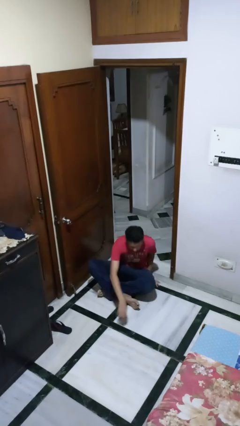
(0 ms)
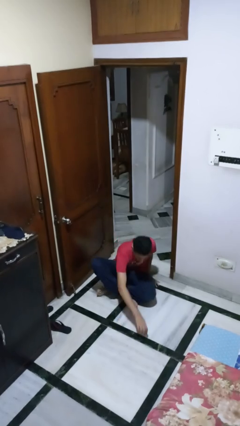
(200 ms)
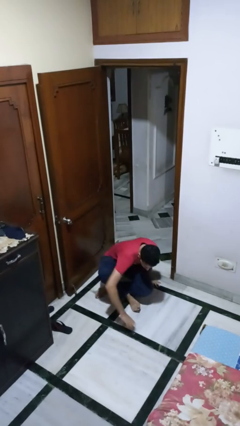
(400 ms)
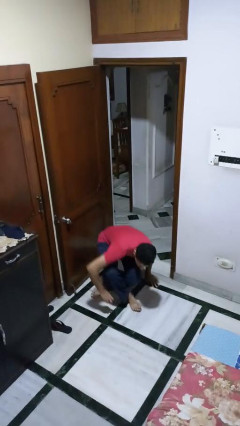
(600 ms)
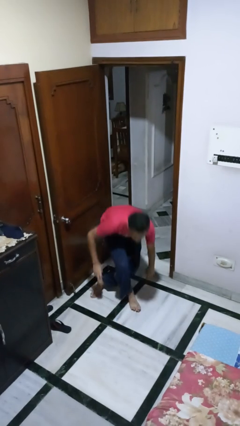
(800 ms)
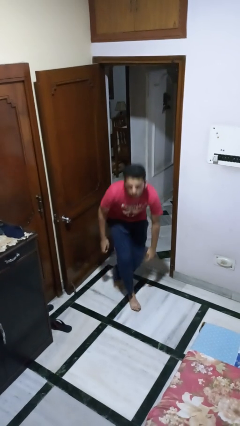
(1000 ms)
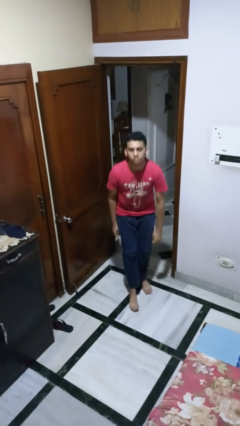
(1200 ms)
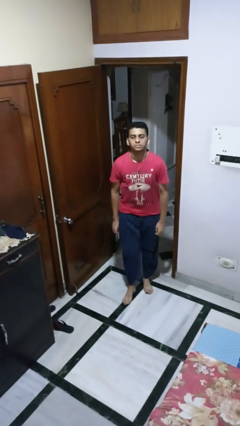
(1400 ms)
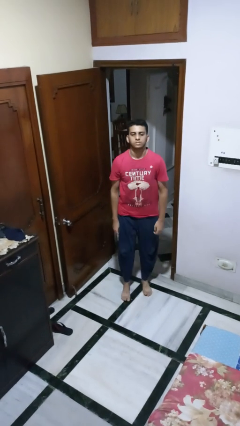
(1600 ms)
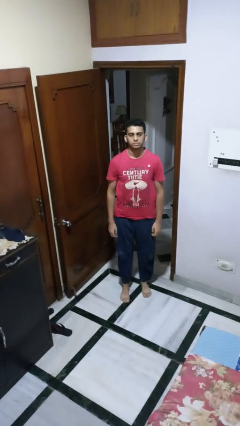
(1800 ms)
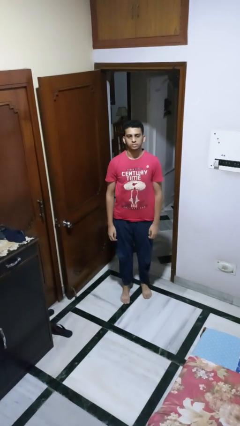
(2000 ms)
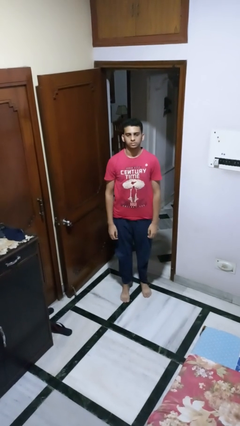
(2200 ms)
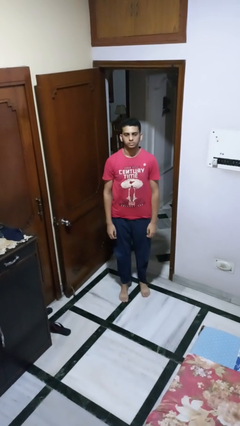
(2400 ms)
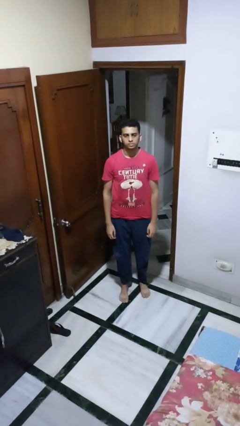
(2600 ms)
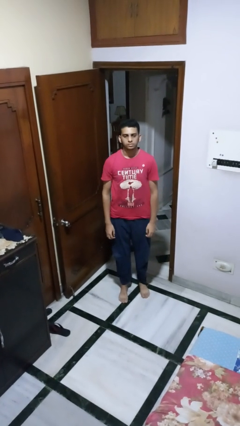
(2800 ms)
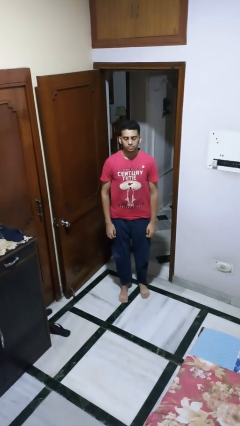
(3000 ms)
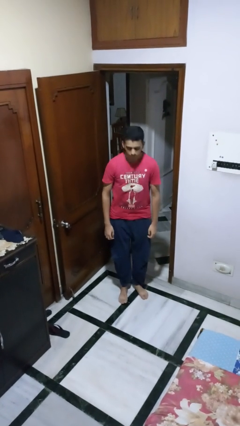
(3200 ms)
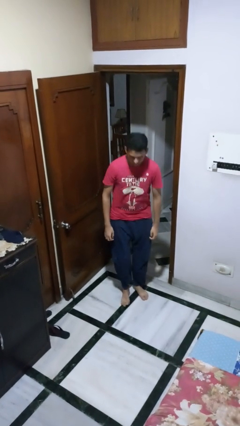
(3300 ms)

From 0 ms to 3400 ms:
person stands up from floor

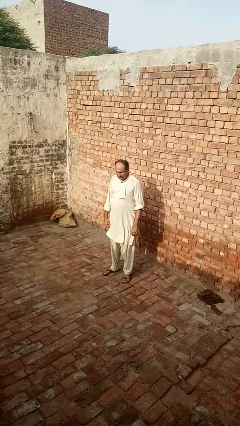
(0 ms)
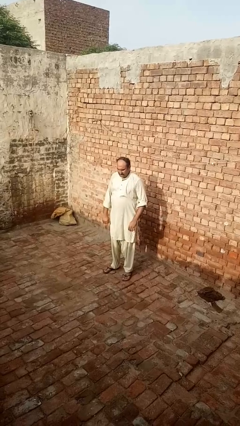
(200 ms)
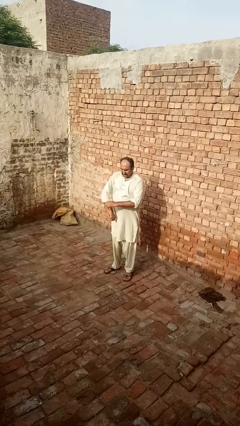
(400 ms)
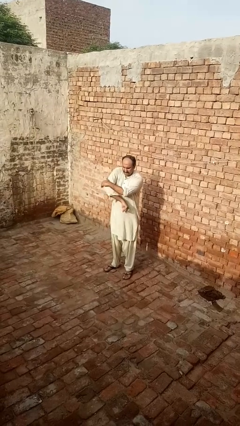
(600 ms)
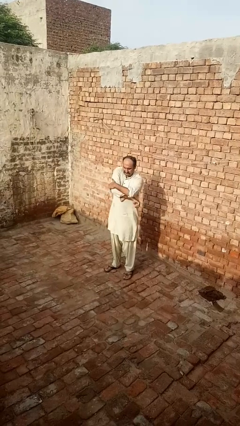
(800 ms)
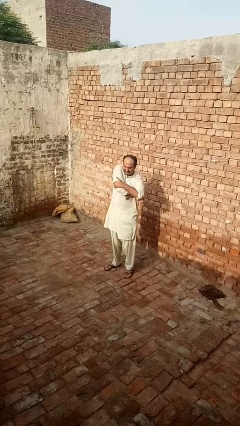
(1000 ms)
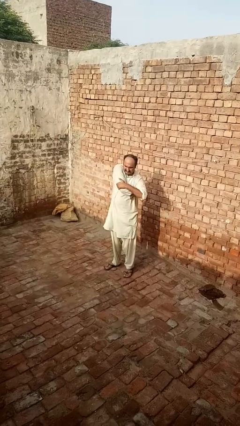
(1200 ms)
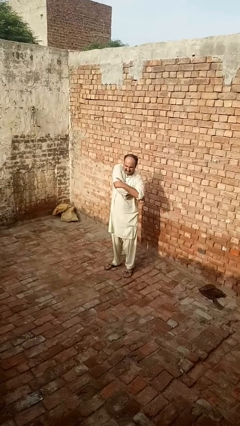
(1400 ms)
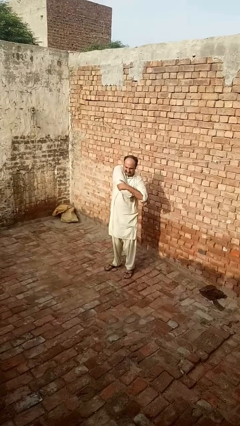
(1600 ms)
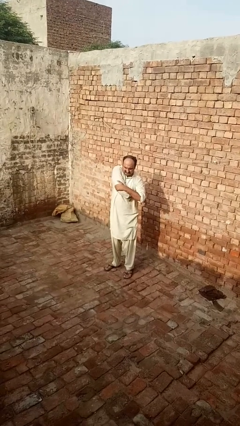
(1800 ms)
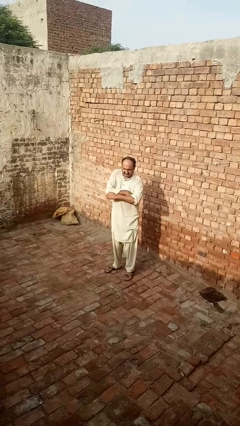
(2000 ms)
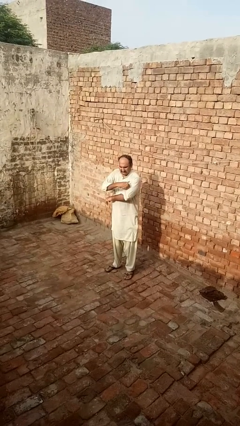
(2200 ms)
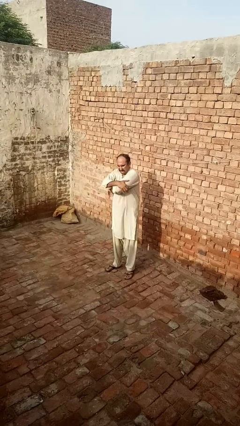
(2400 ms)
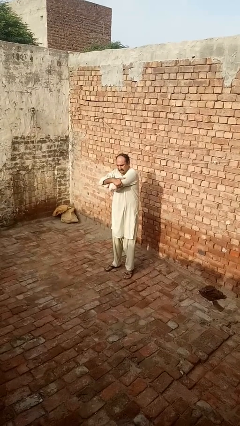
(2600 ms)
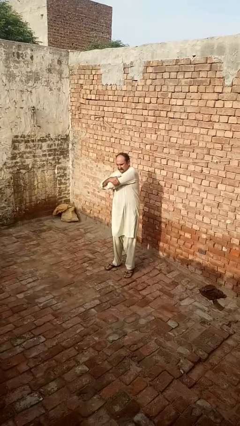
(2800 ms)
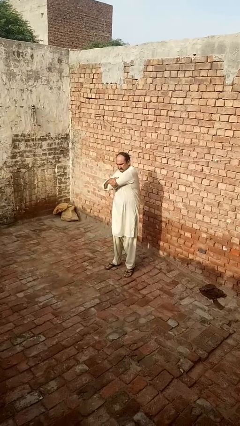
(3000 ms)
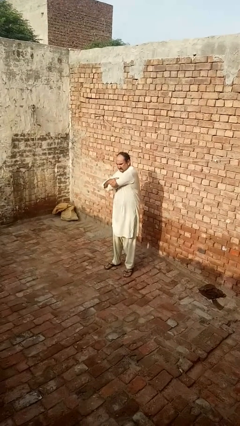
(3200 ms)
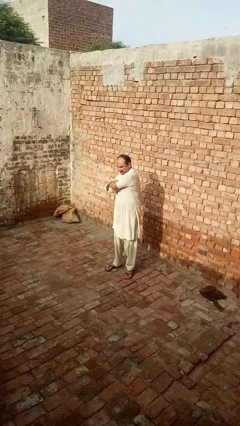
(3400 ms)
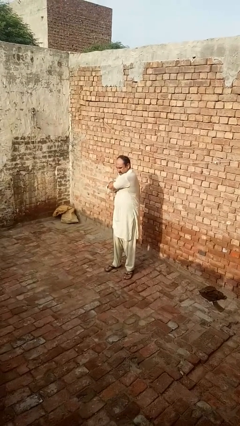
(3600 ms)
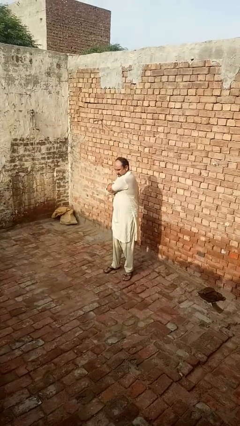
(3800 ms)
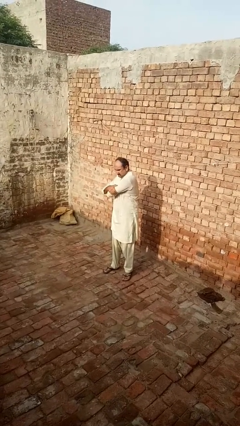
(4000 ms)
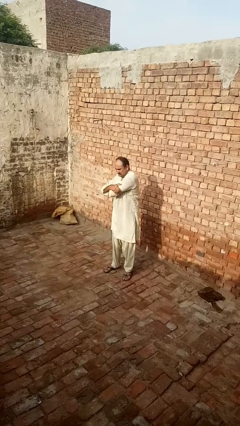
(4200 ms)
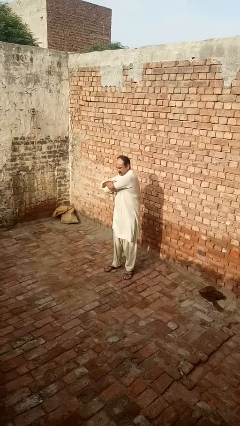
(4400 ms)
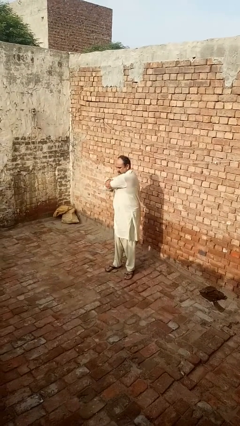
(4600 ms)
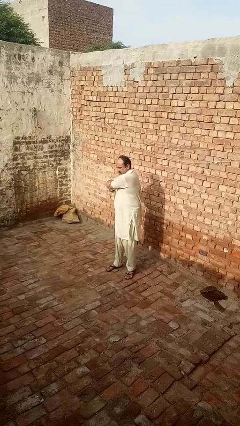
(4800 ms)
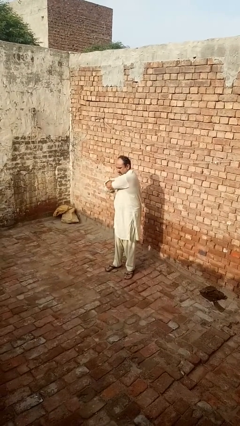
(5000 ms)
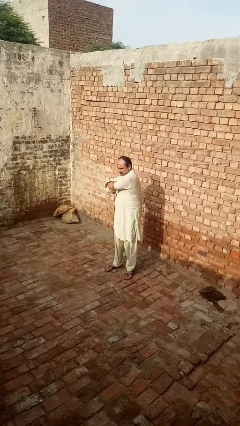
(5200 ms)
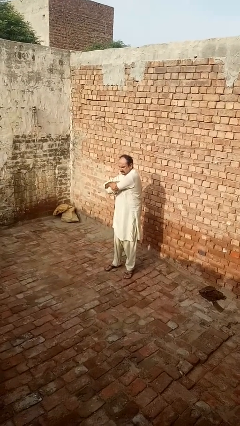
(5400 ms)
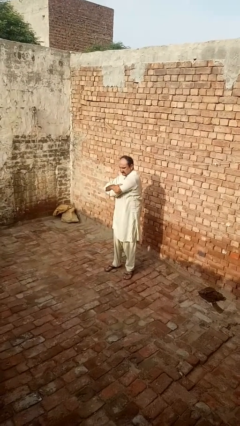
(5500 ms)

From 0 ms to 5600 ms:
person stretches arms to side

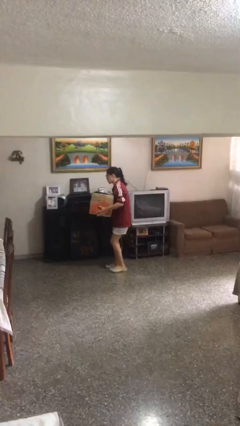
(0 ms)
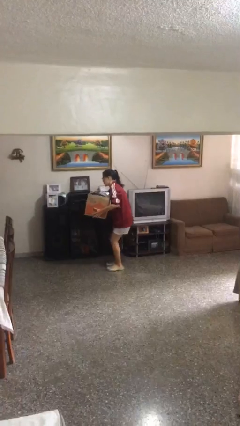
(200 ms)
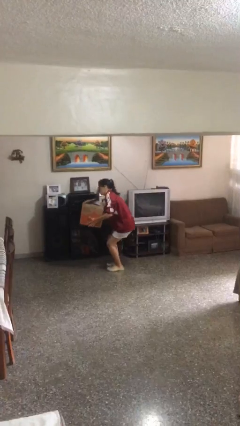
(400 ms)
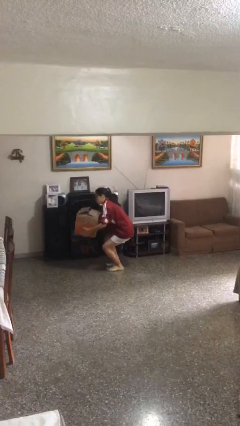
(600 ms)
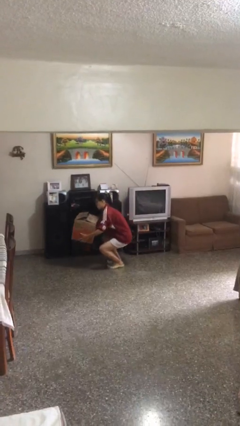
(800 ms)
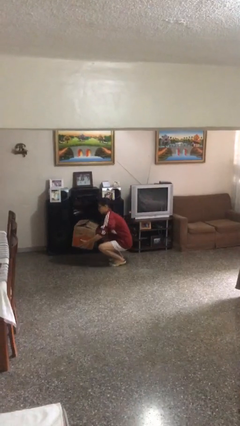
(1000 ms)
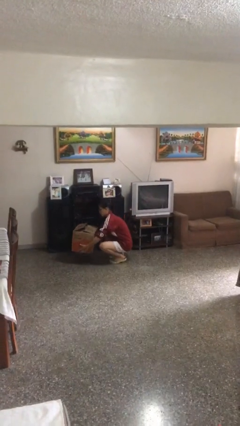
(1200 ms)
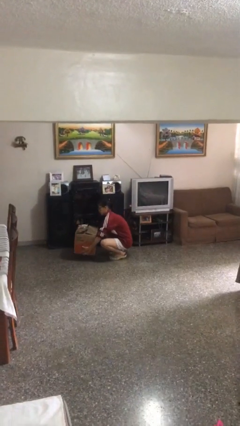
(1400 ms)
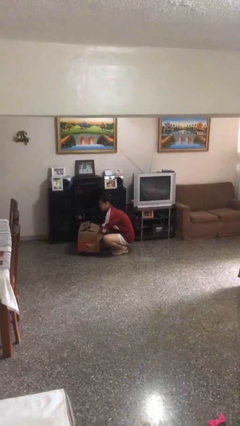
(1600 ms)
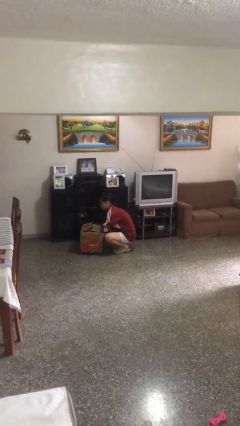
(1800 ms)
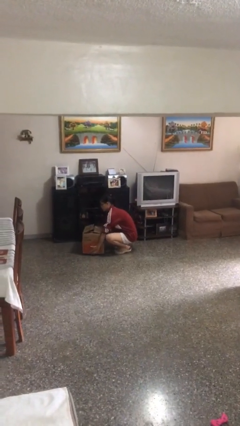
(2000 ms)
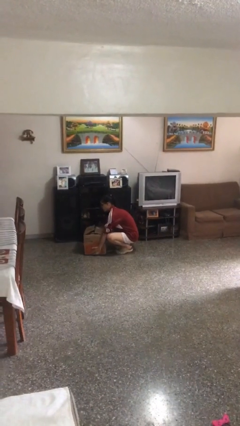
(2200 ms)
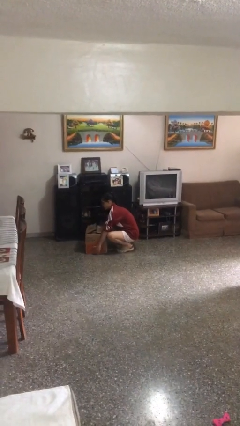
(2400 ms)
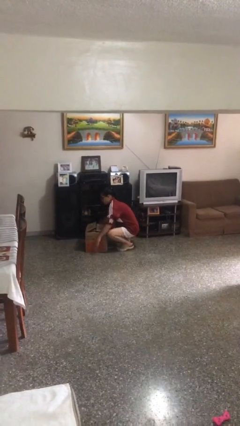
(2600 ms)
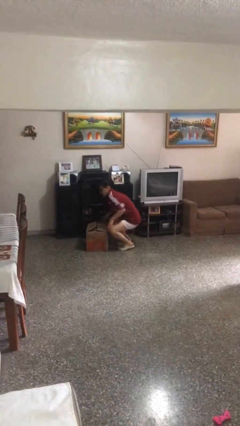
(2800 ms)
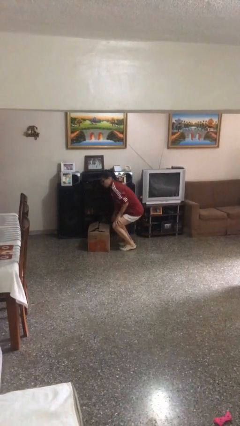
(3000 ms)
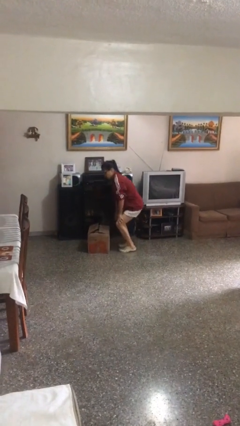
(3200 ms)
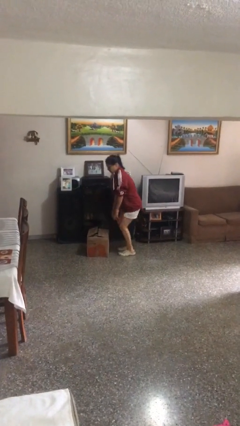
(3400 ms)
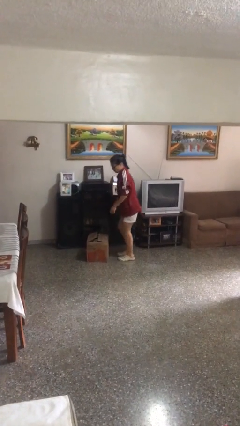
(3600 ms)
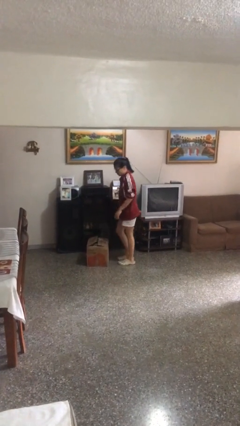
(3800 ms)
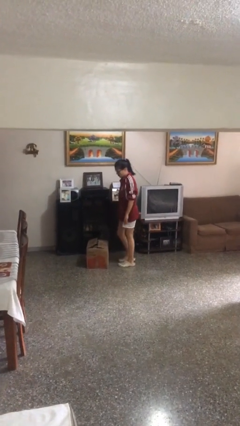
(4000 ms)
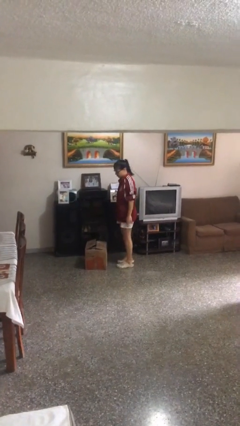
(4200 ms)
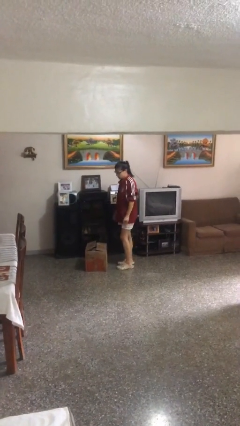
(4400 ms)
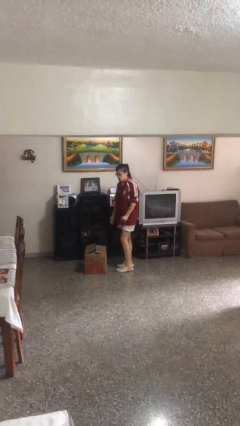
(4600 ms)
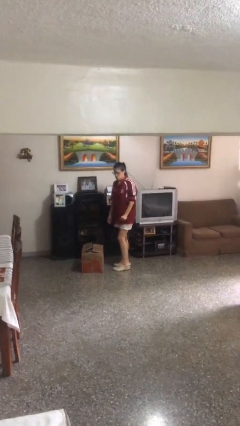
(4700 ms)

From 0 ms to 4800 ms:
person puts down object on floor

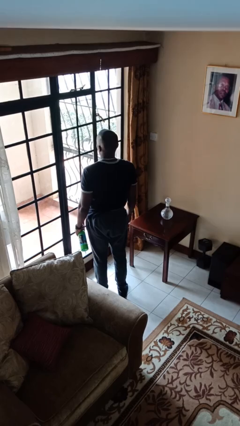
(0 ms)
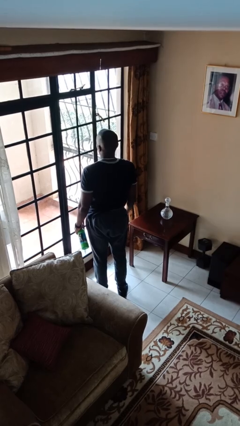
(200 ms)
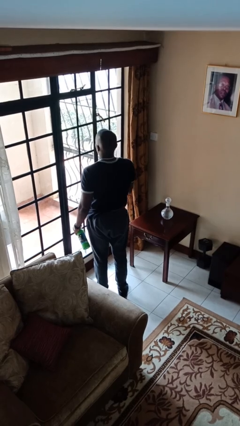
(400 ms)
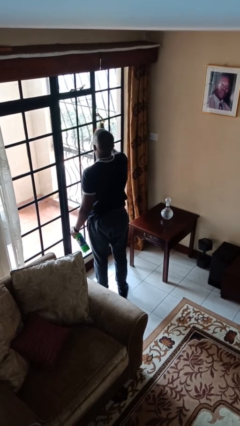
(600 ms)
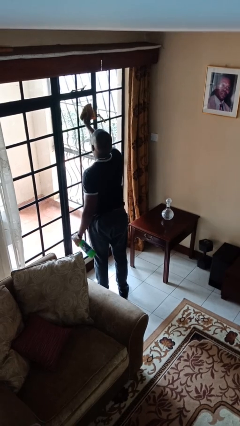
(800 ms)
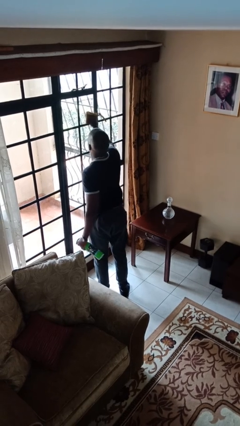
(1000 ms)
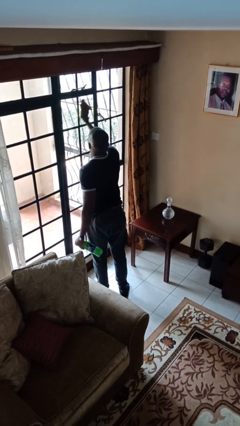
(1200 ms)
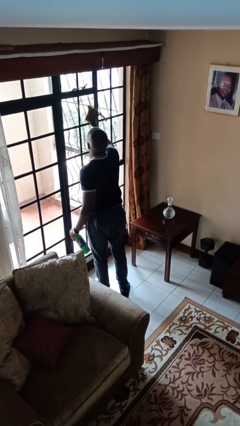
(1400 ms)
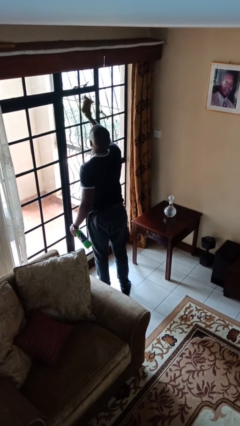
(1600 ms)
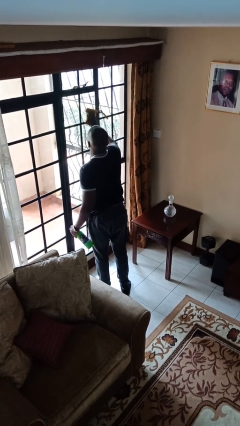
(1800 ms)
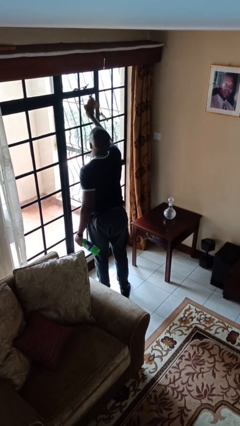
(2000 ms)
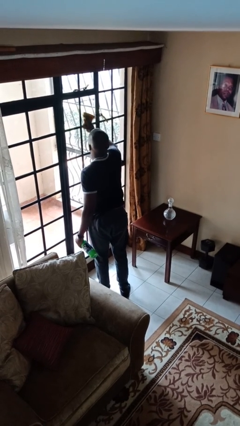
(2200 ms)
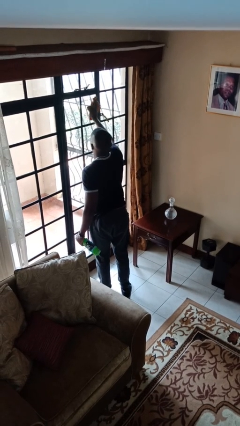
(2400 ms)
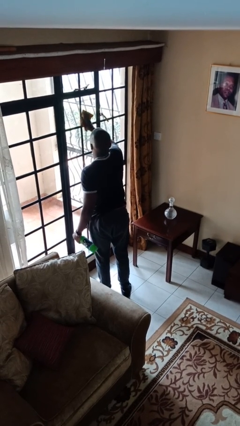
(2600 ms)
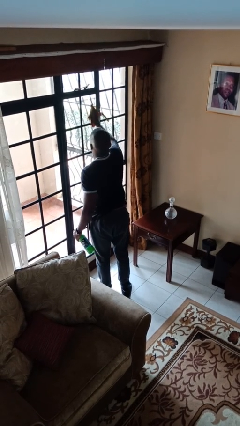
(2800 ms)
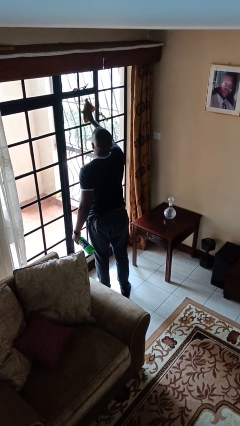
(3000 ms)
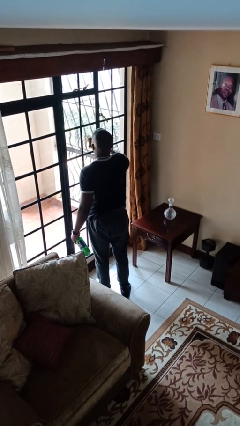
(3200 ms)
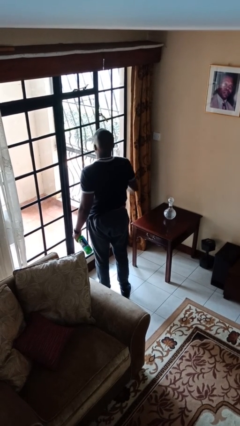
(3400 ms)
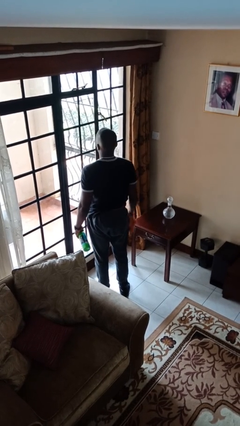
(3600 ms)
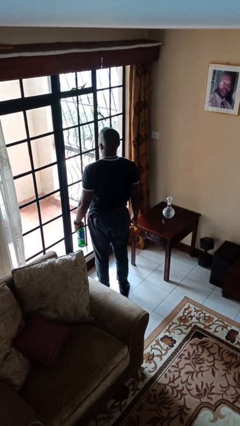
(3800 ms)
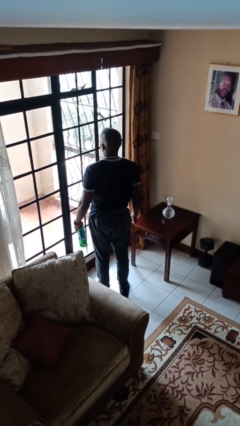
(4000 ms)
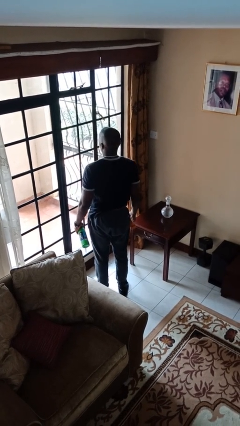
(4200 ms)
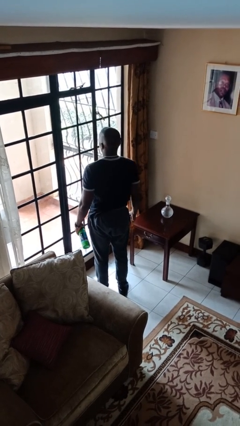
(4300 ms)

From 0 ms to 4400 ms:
person washes window
